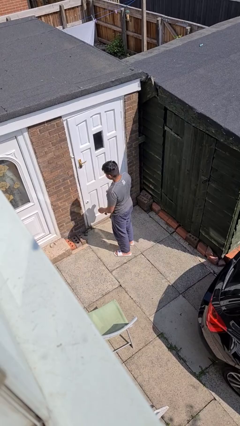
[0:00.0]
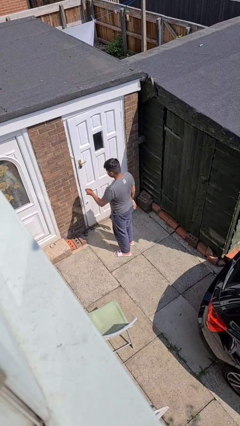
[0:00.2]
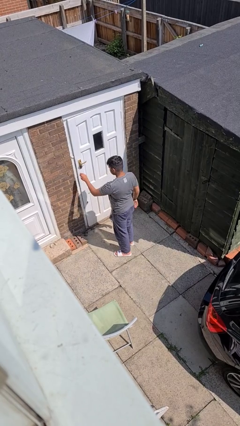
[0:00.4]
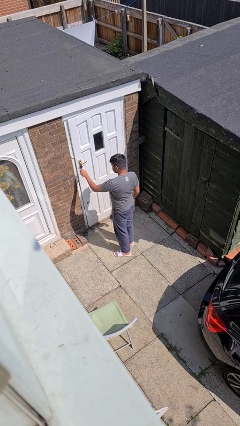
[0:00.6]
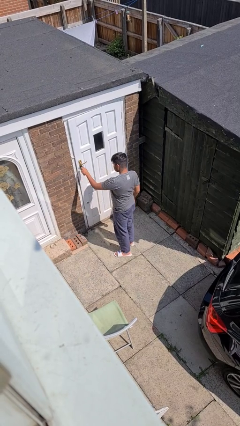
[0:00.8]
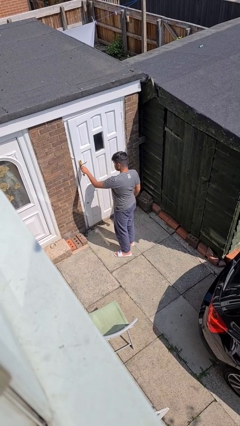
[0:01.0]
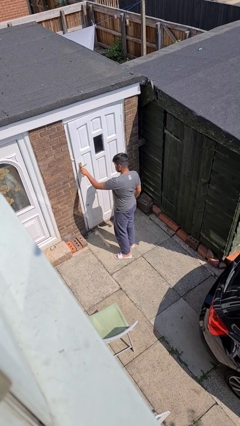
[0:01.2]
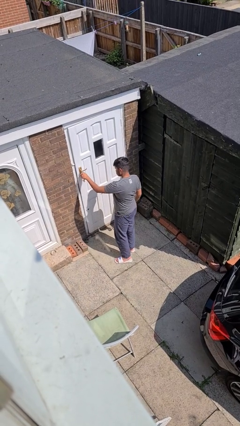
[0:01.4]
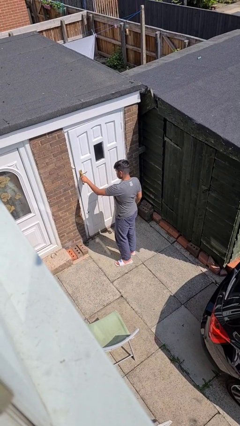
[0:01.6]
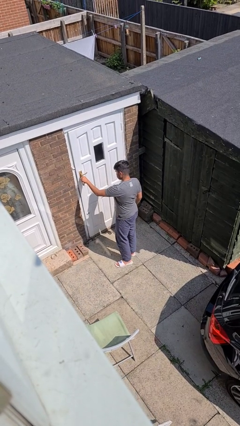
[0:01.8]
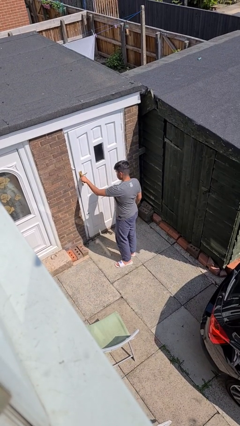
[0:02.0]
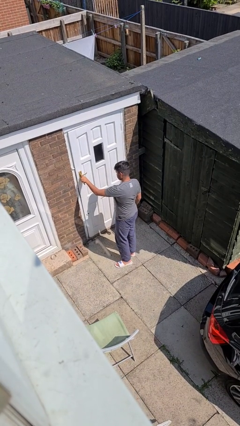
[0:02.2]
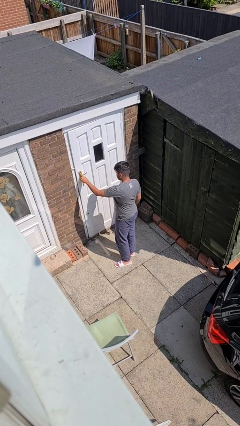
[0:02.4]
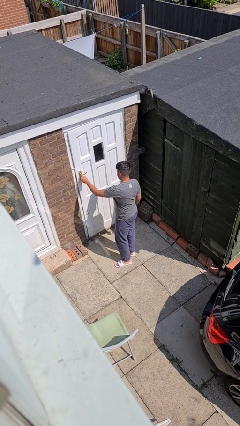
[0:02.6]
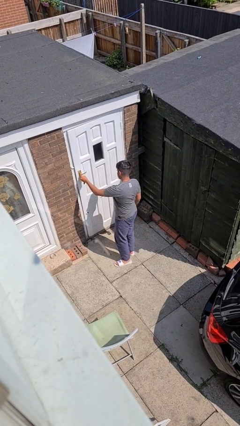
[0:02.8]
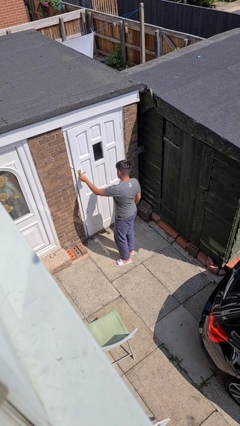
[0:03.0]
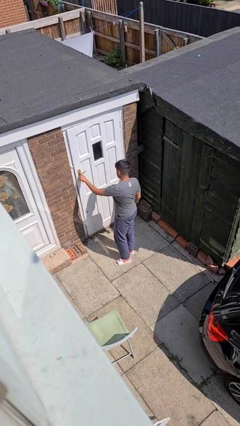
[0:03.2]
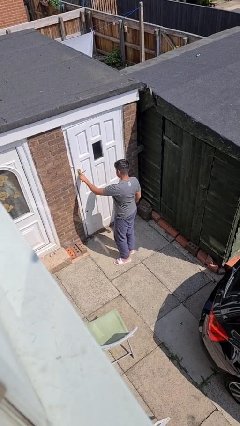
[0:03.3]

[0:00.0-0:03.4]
person locks door with keys

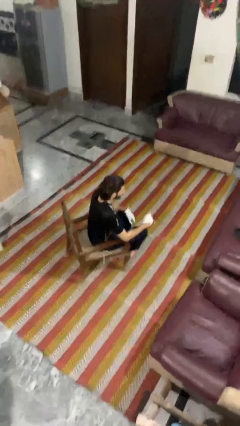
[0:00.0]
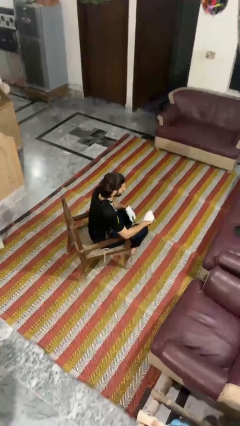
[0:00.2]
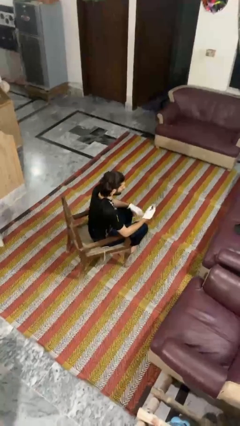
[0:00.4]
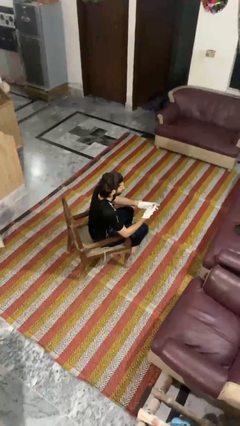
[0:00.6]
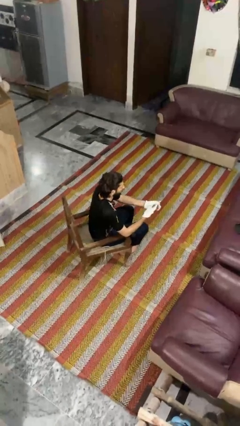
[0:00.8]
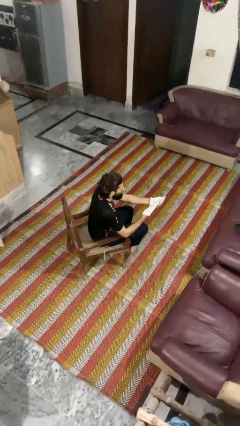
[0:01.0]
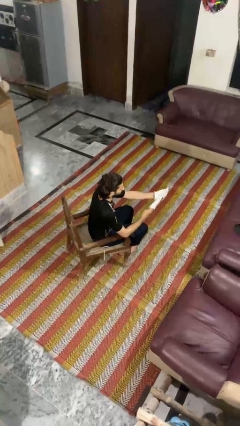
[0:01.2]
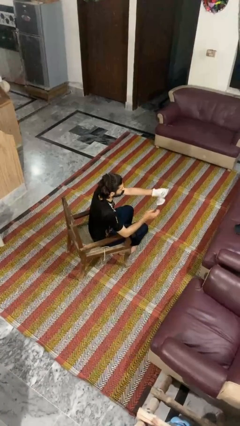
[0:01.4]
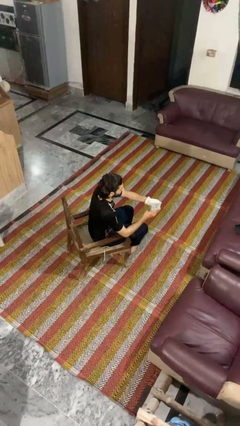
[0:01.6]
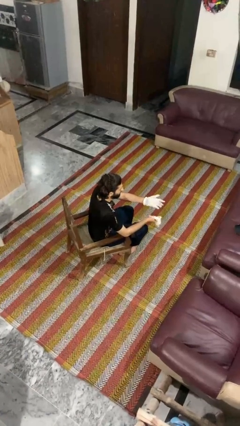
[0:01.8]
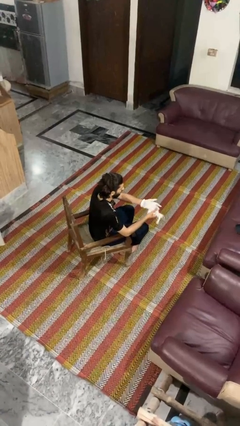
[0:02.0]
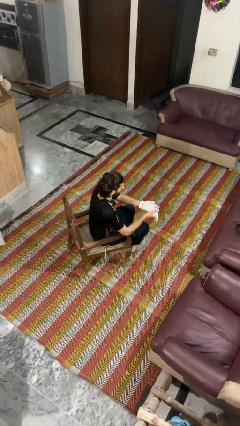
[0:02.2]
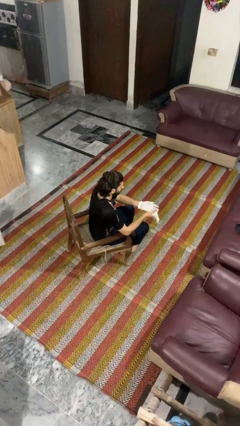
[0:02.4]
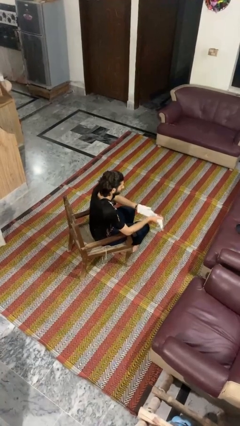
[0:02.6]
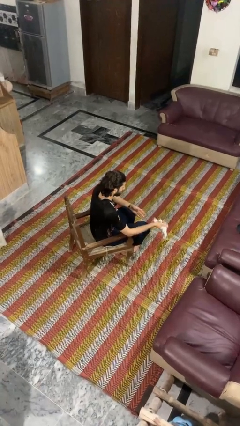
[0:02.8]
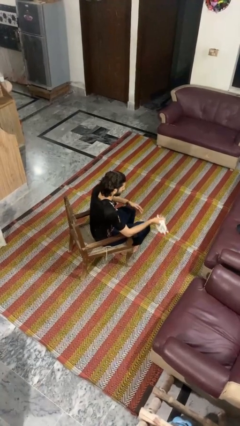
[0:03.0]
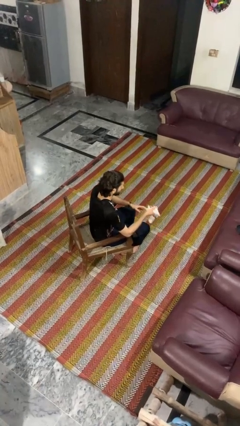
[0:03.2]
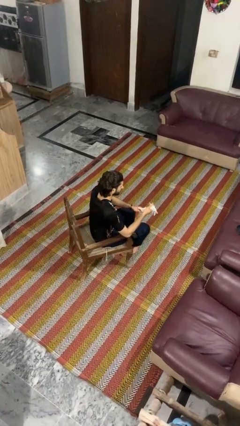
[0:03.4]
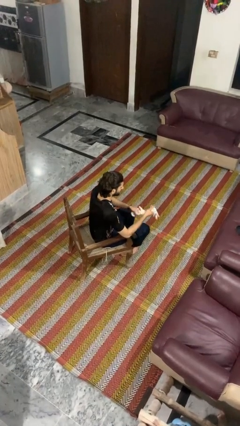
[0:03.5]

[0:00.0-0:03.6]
person takes off gloves

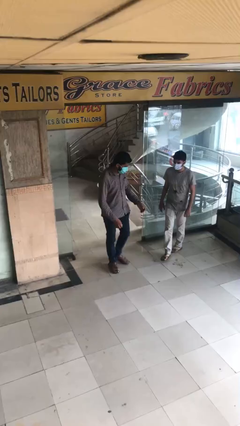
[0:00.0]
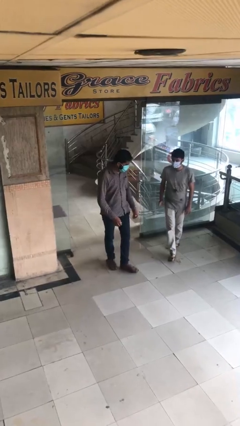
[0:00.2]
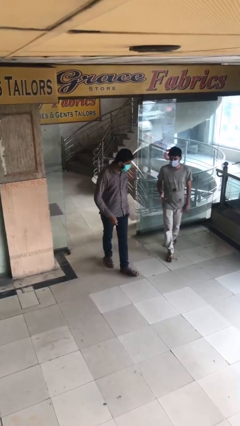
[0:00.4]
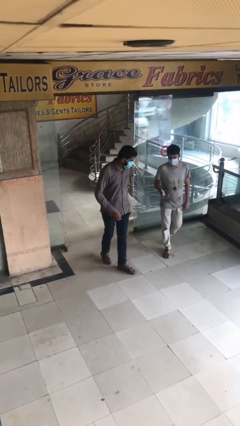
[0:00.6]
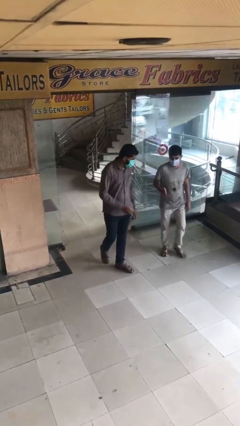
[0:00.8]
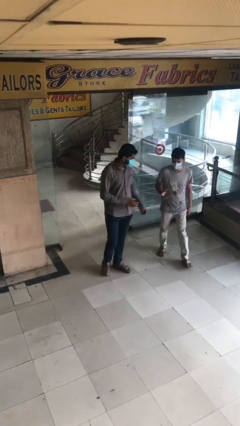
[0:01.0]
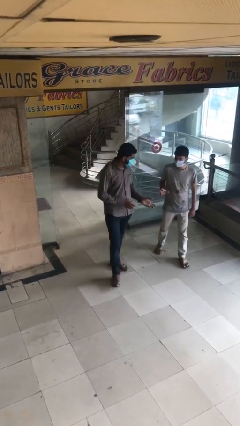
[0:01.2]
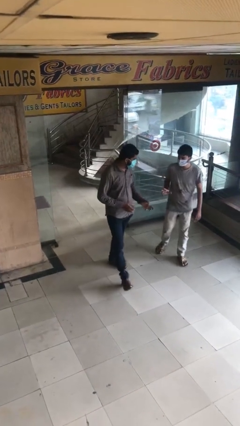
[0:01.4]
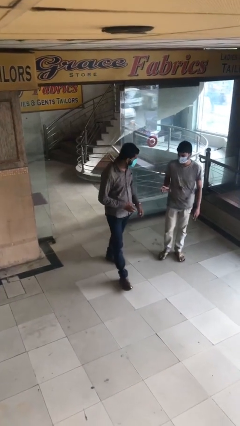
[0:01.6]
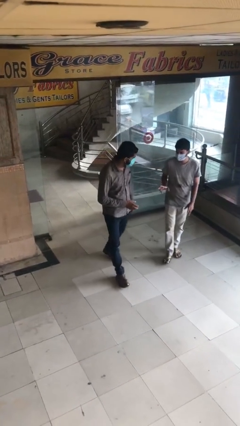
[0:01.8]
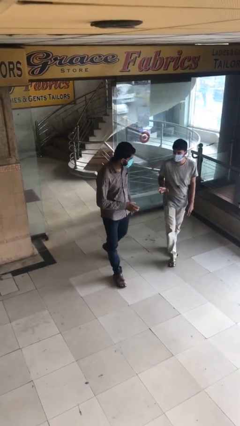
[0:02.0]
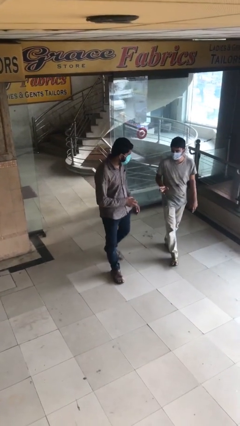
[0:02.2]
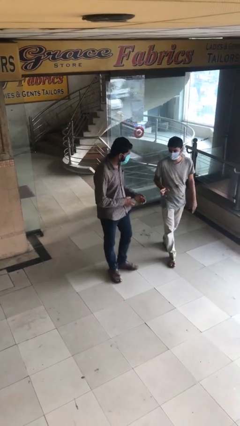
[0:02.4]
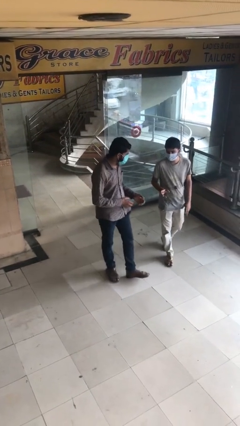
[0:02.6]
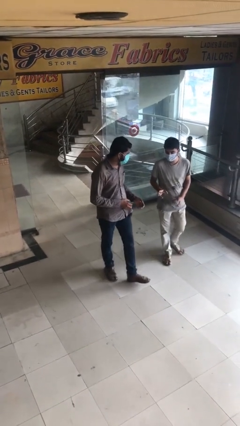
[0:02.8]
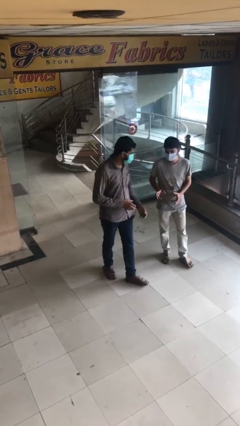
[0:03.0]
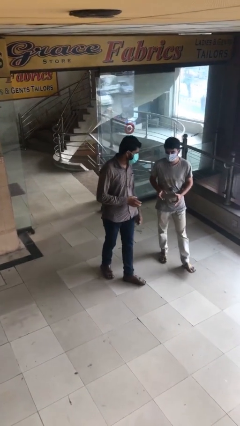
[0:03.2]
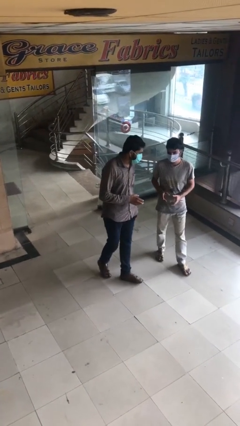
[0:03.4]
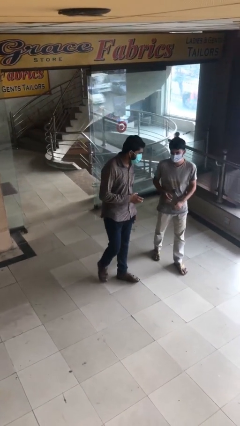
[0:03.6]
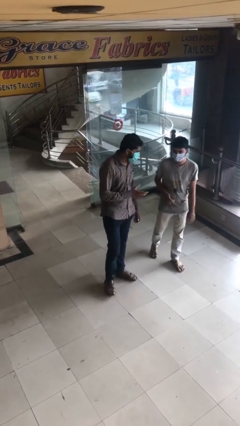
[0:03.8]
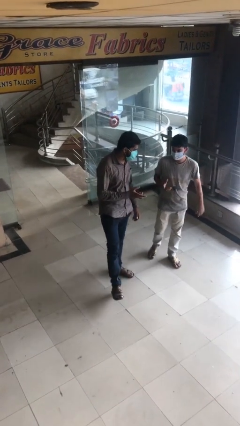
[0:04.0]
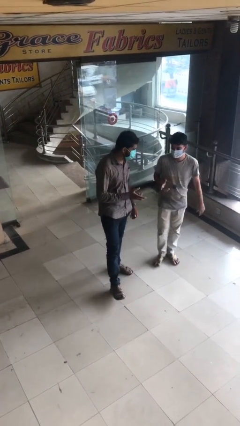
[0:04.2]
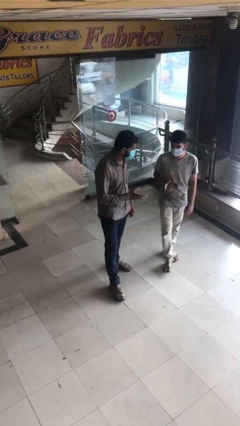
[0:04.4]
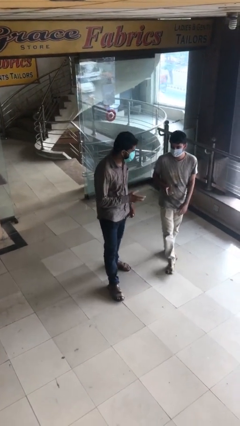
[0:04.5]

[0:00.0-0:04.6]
person talks to person

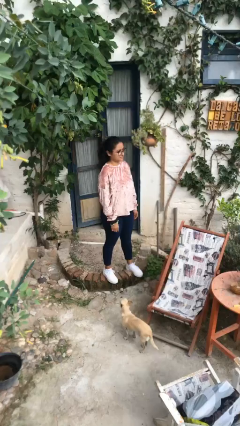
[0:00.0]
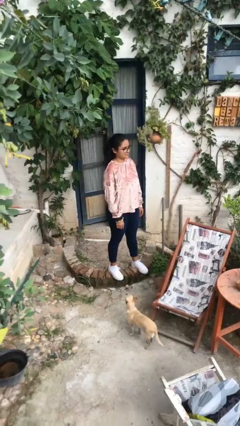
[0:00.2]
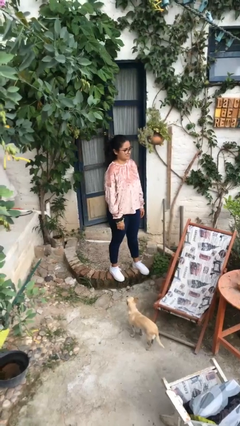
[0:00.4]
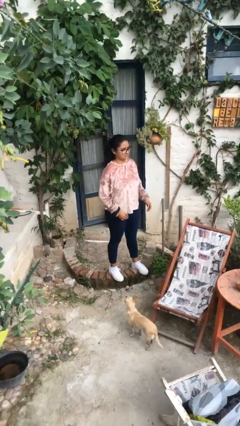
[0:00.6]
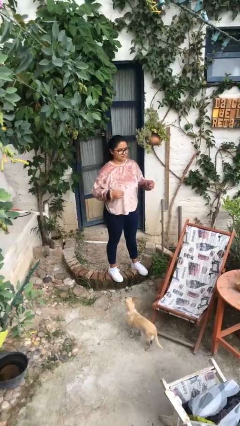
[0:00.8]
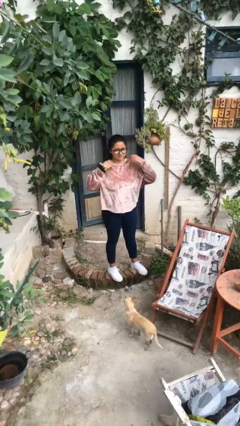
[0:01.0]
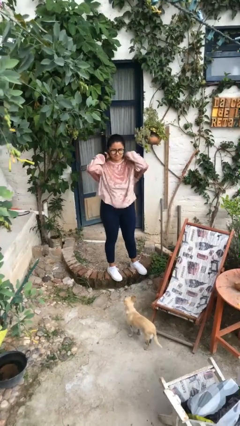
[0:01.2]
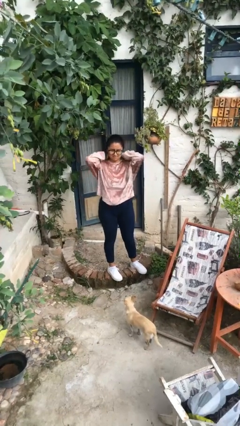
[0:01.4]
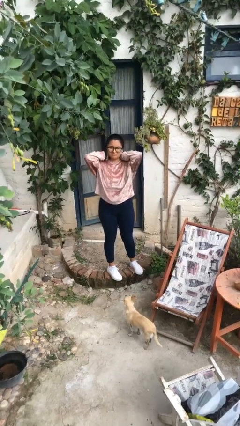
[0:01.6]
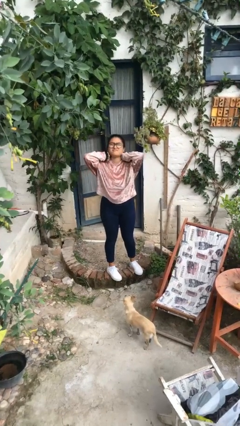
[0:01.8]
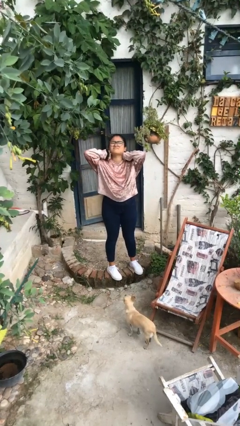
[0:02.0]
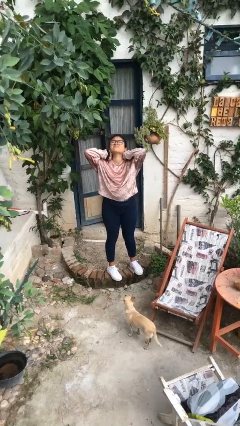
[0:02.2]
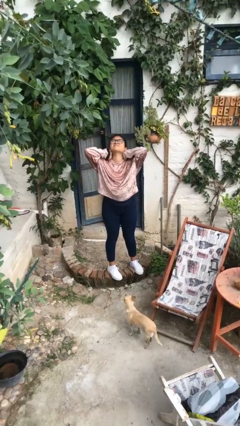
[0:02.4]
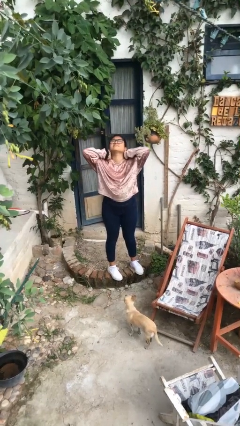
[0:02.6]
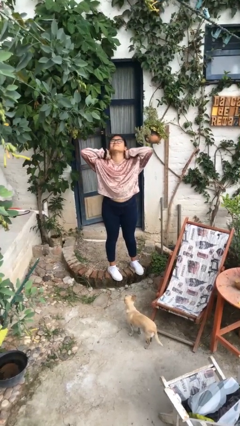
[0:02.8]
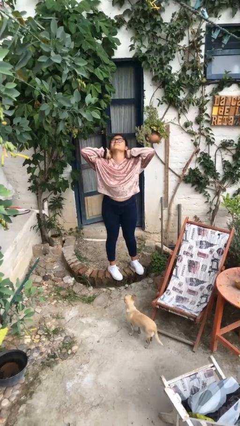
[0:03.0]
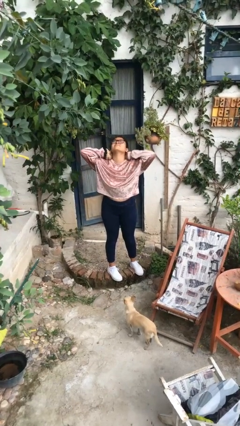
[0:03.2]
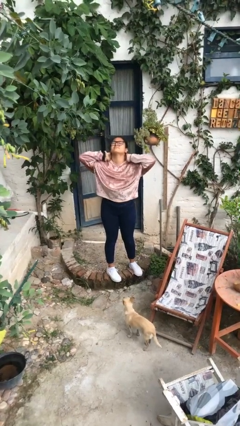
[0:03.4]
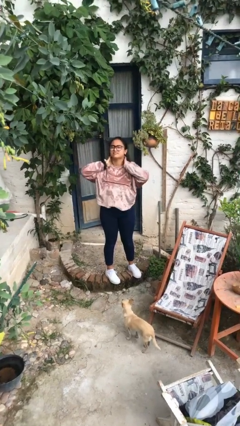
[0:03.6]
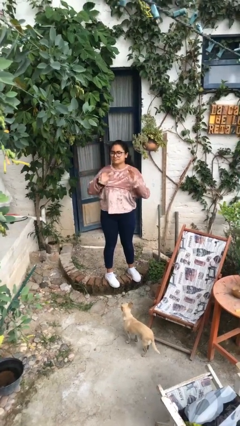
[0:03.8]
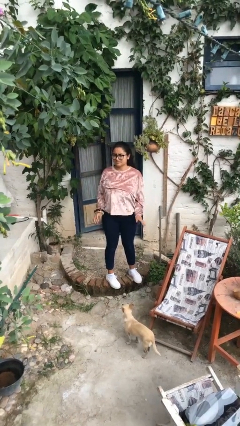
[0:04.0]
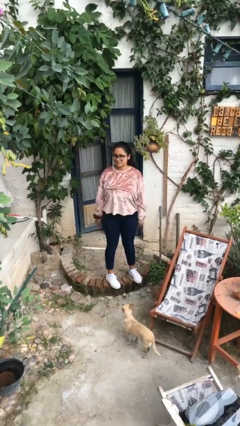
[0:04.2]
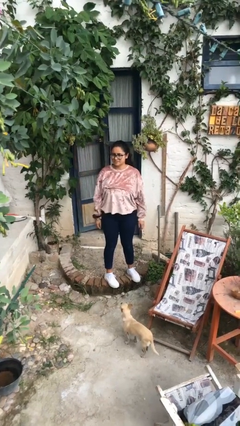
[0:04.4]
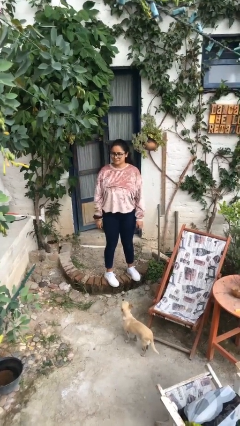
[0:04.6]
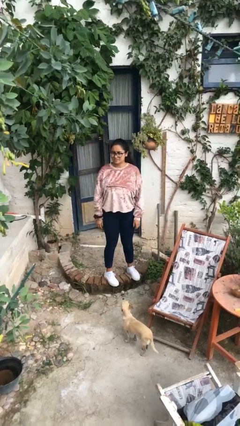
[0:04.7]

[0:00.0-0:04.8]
person rubs neck

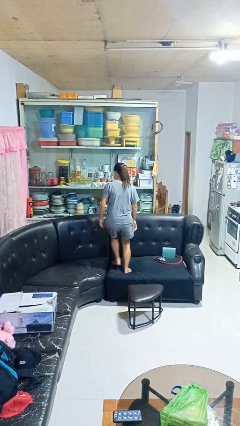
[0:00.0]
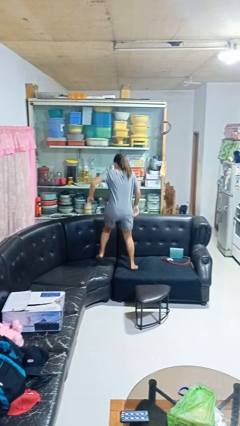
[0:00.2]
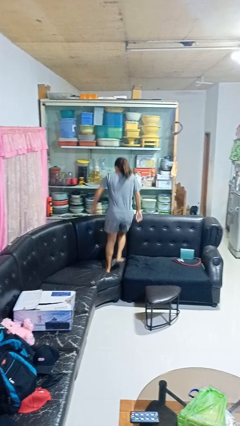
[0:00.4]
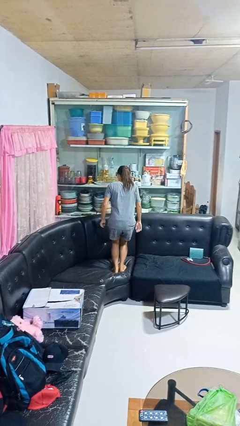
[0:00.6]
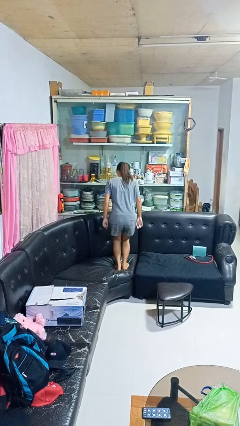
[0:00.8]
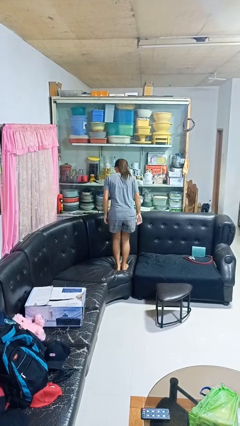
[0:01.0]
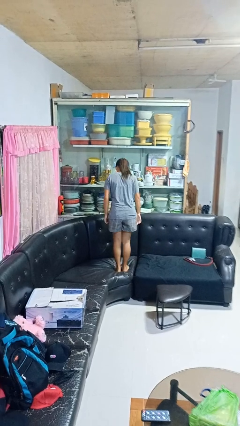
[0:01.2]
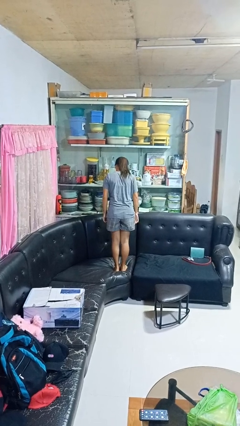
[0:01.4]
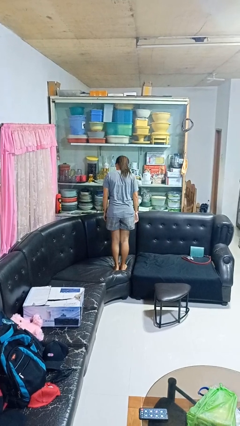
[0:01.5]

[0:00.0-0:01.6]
person jumps on couch
